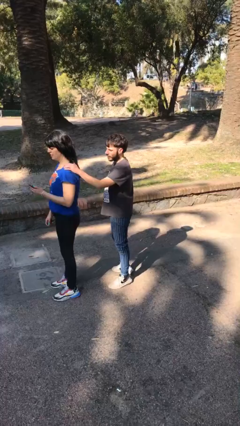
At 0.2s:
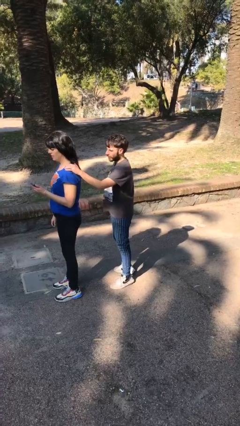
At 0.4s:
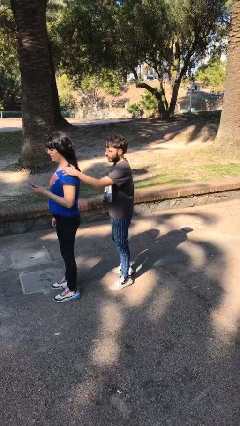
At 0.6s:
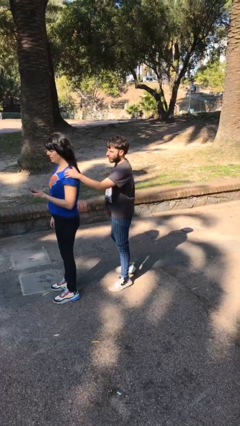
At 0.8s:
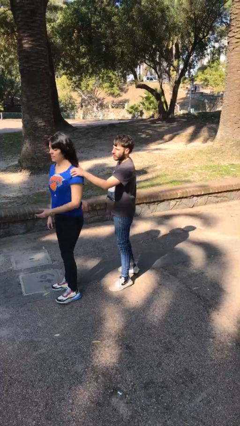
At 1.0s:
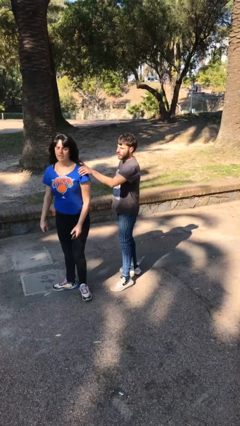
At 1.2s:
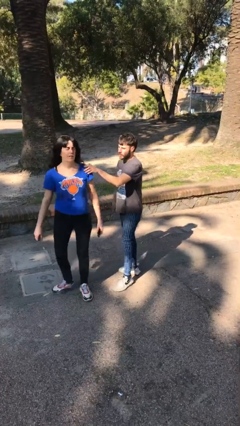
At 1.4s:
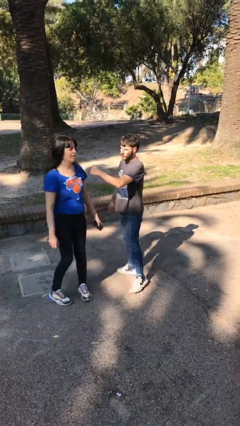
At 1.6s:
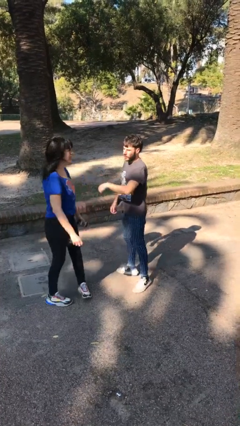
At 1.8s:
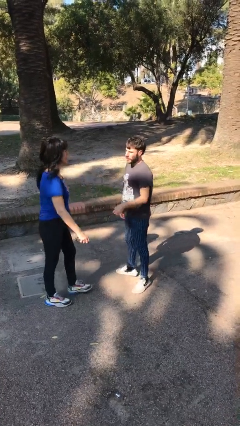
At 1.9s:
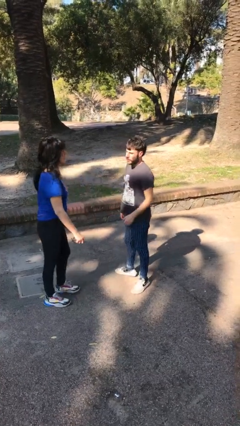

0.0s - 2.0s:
person spins person around

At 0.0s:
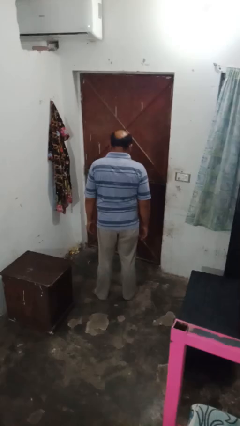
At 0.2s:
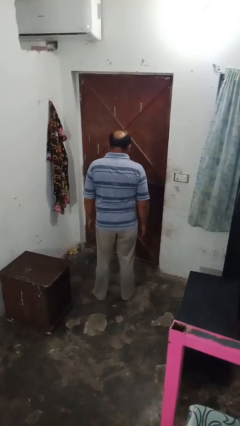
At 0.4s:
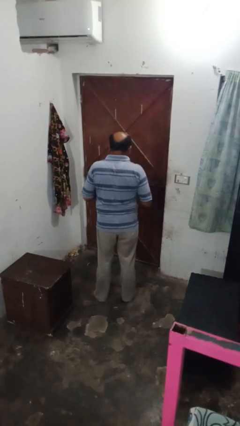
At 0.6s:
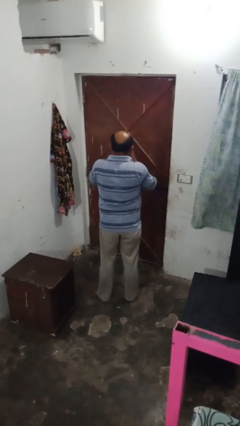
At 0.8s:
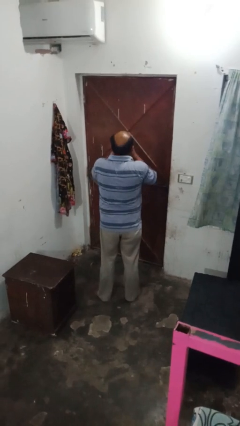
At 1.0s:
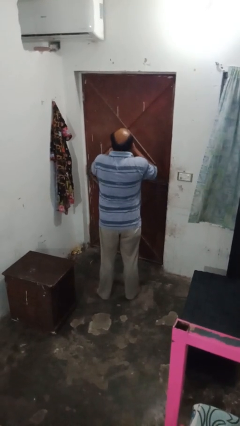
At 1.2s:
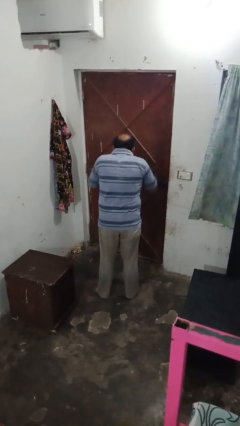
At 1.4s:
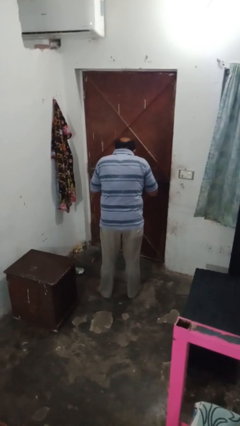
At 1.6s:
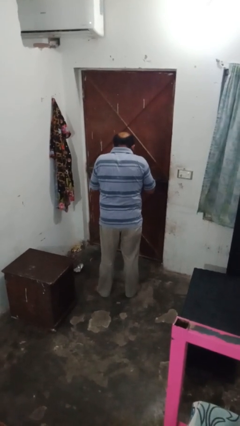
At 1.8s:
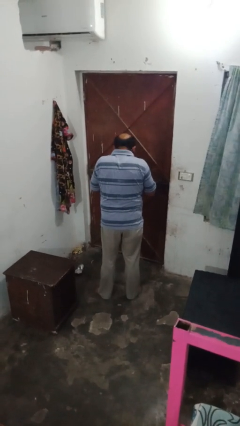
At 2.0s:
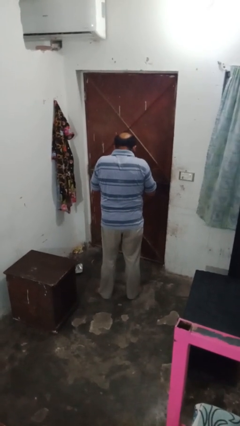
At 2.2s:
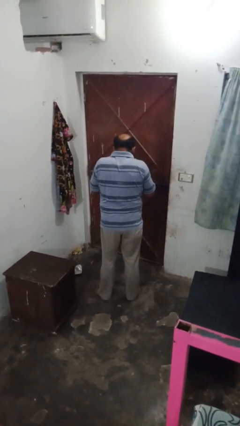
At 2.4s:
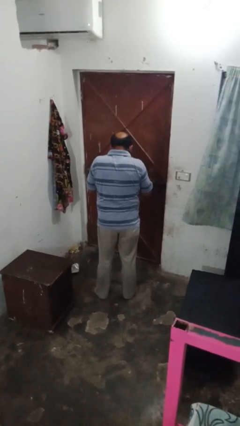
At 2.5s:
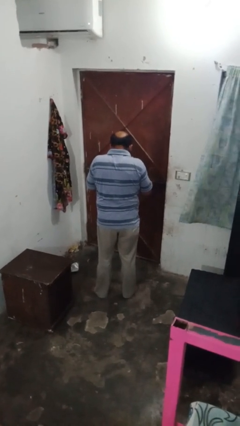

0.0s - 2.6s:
person blows nose

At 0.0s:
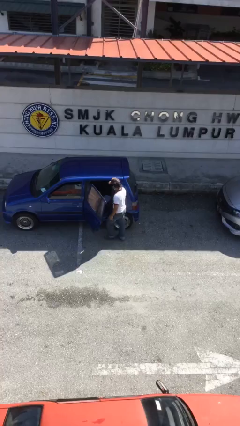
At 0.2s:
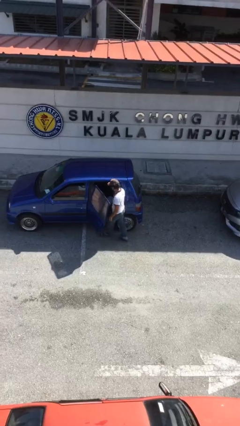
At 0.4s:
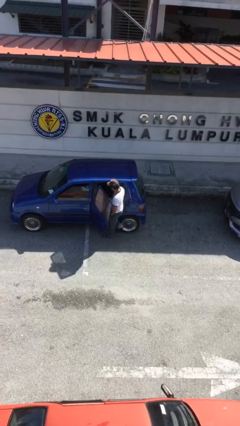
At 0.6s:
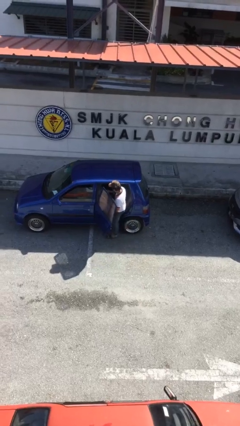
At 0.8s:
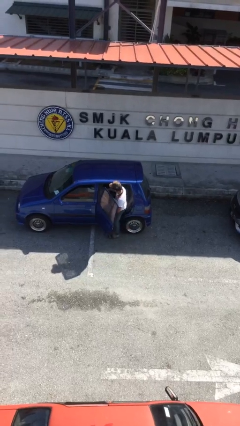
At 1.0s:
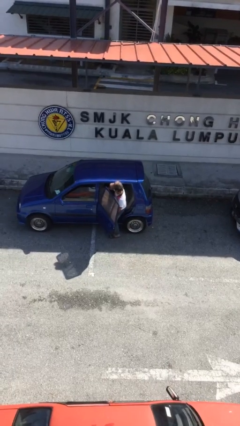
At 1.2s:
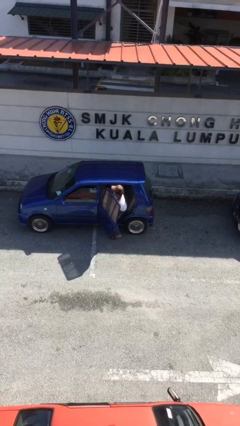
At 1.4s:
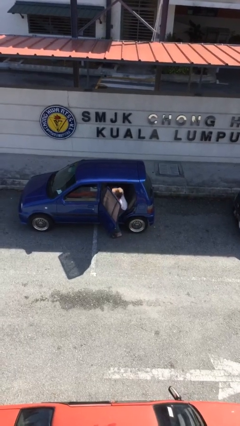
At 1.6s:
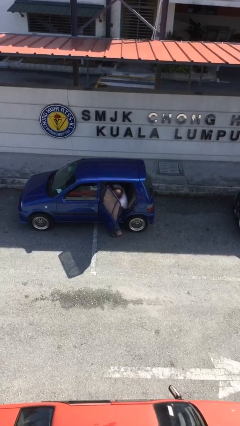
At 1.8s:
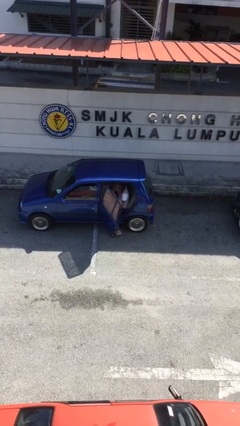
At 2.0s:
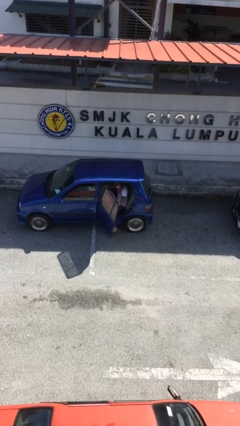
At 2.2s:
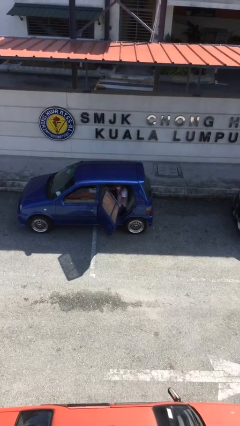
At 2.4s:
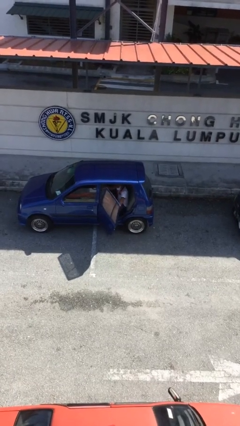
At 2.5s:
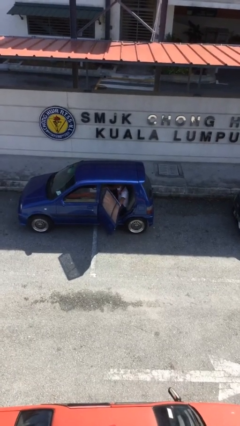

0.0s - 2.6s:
person enters car

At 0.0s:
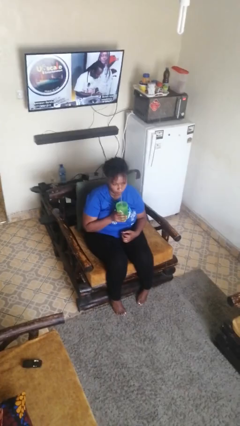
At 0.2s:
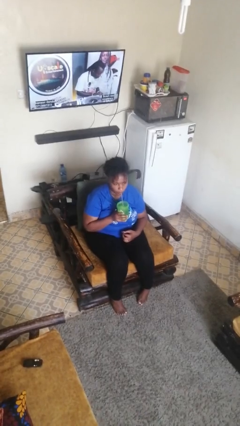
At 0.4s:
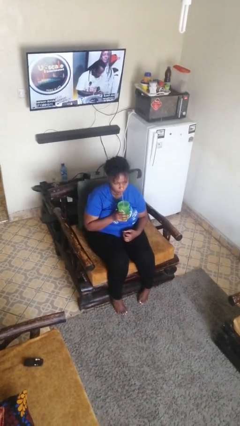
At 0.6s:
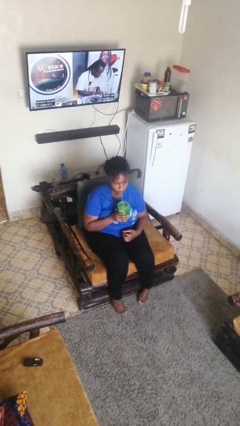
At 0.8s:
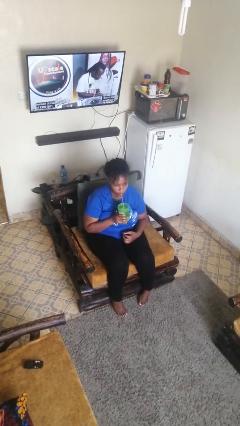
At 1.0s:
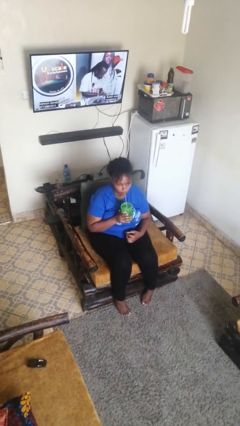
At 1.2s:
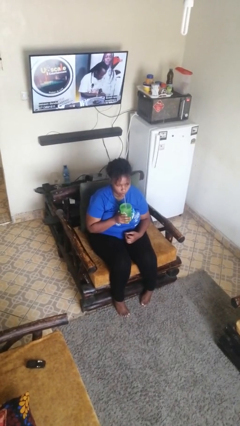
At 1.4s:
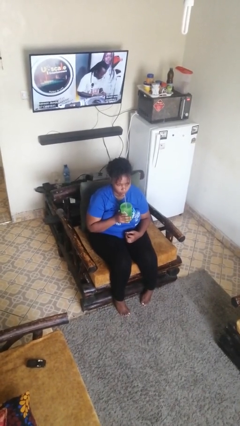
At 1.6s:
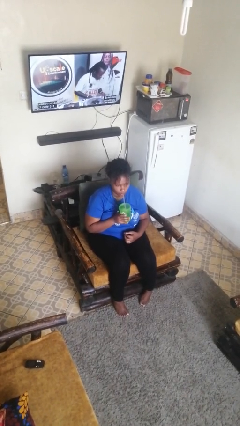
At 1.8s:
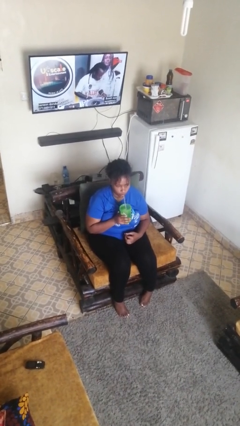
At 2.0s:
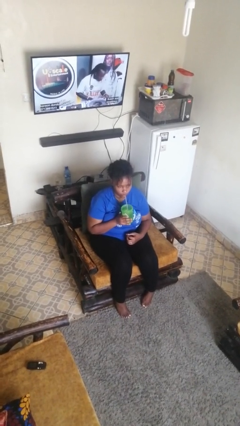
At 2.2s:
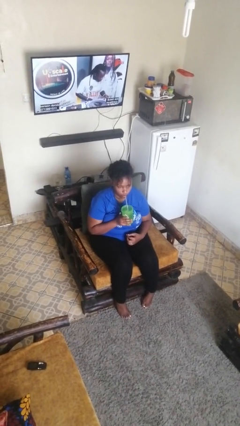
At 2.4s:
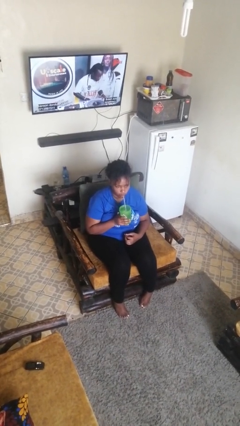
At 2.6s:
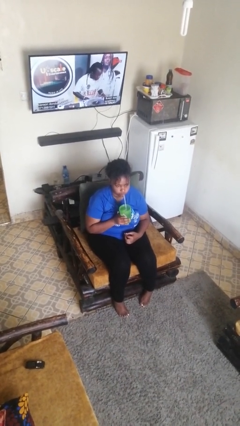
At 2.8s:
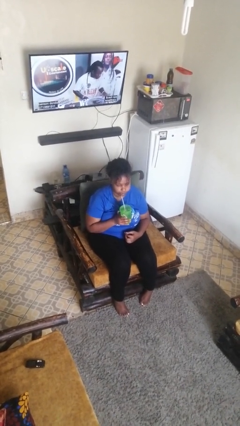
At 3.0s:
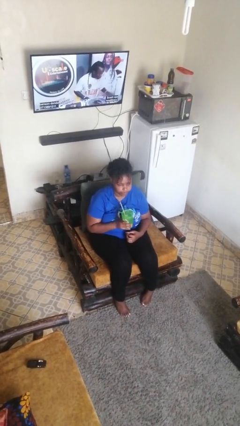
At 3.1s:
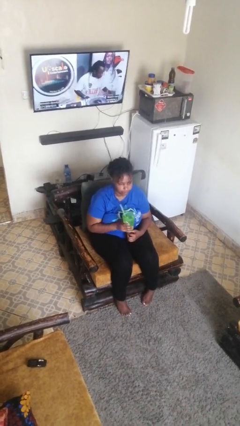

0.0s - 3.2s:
person drinks from straw

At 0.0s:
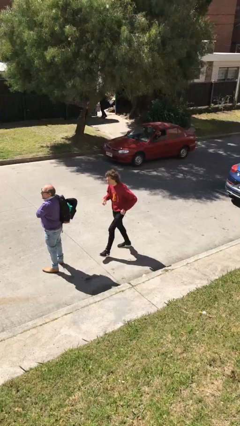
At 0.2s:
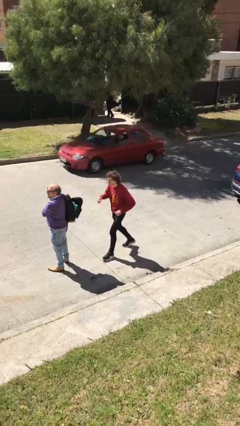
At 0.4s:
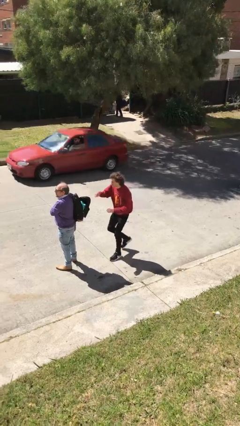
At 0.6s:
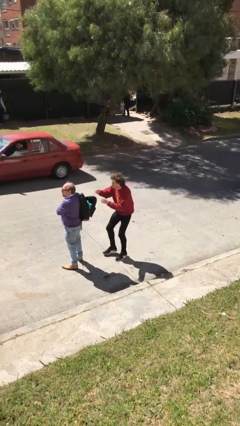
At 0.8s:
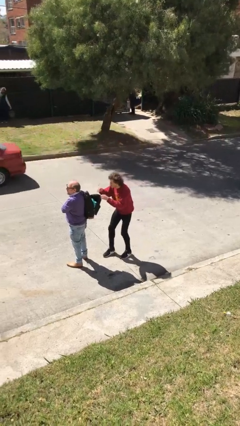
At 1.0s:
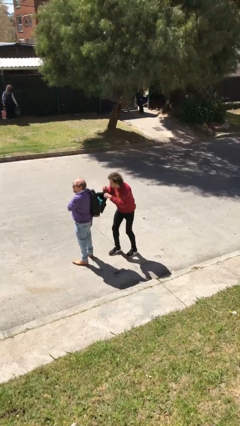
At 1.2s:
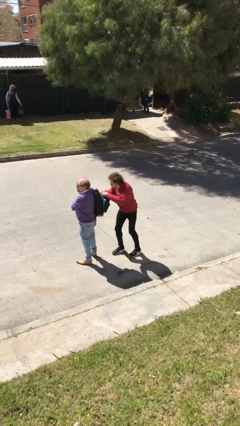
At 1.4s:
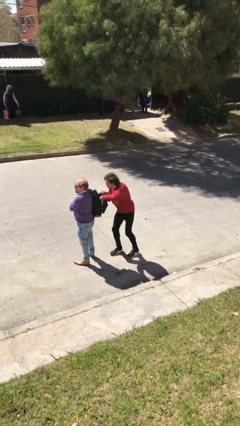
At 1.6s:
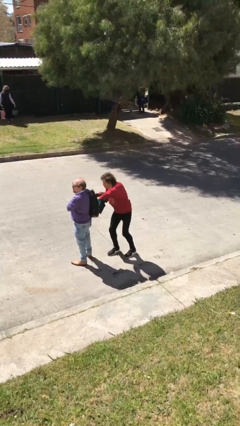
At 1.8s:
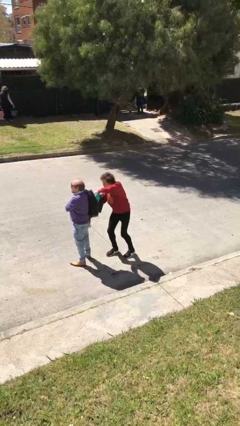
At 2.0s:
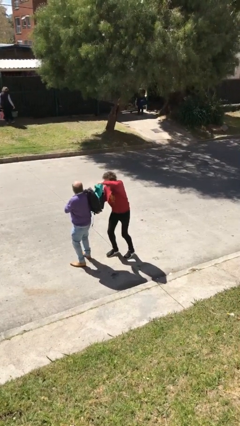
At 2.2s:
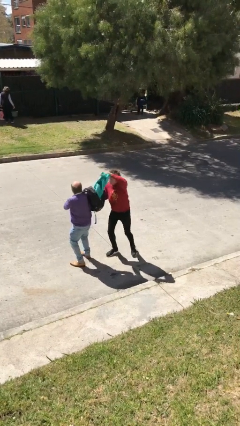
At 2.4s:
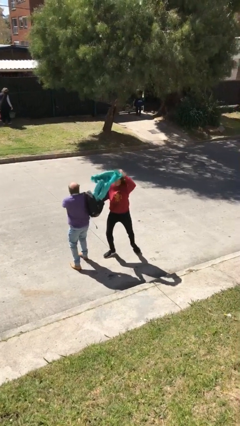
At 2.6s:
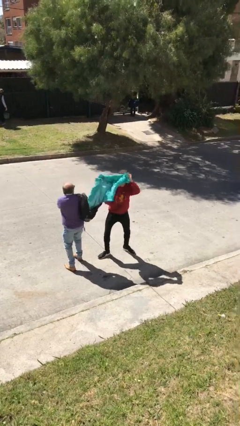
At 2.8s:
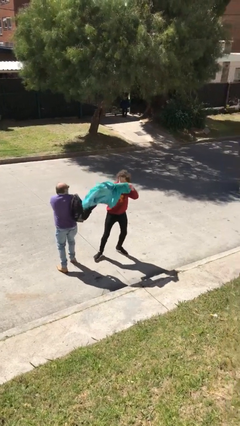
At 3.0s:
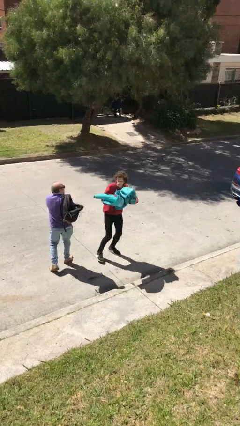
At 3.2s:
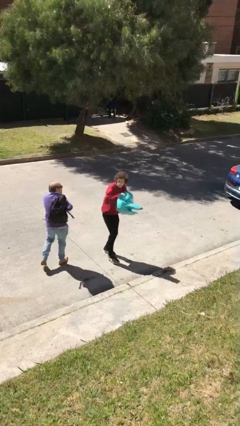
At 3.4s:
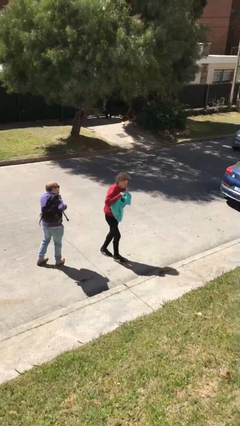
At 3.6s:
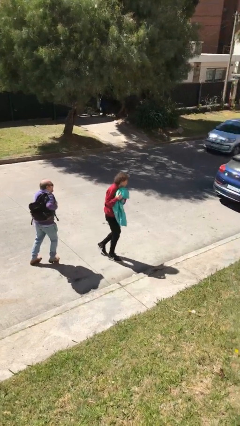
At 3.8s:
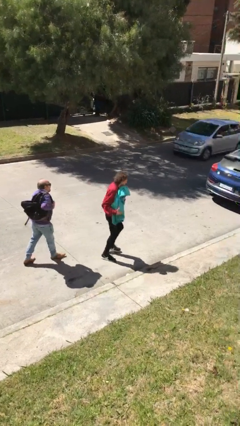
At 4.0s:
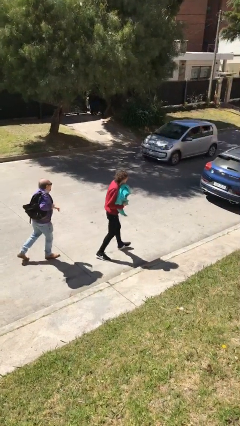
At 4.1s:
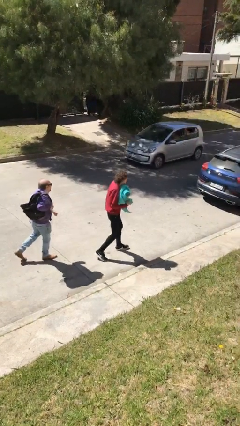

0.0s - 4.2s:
person steals object from person

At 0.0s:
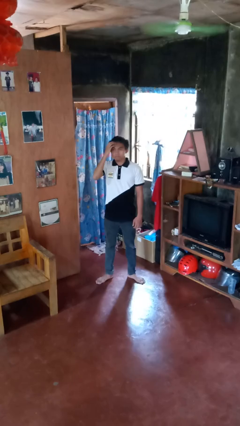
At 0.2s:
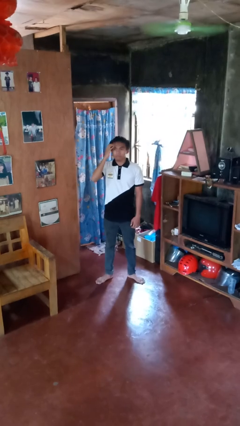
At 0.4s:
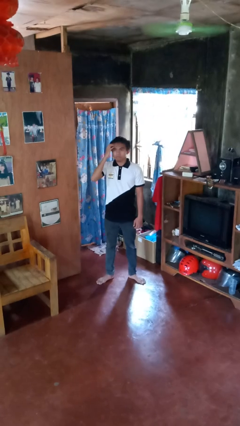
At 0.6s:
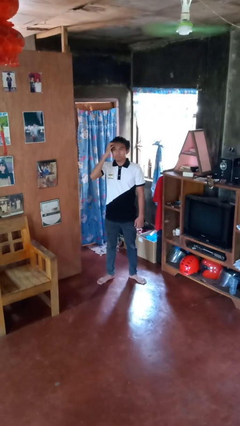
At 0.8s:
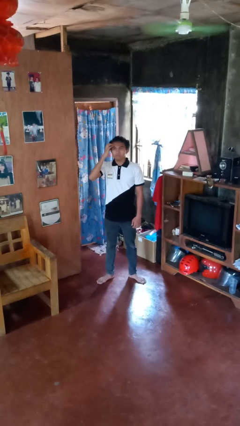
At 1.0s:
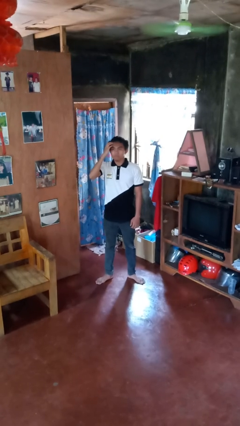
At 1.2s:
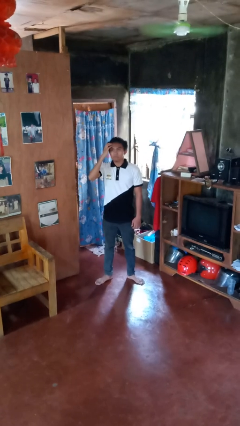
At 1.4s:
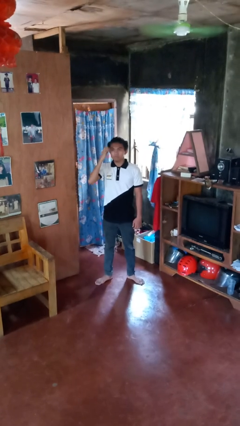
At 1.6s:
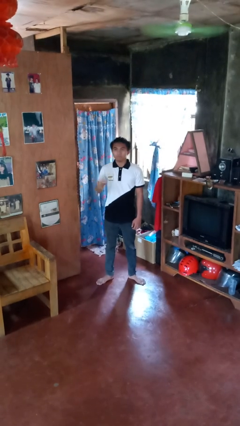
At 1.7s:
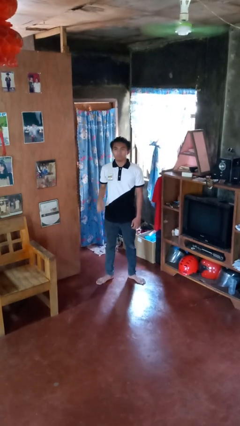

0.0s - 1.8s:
person scratches face

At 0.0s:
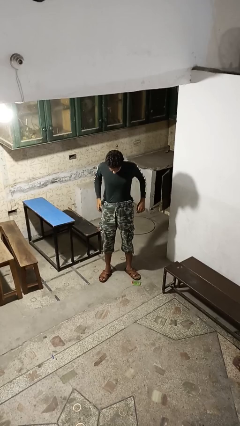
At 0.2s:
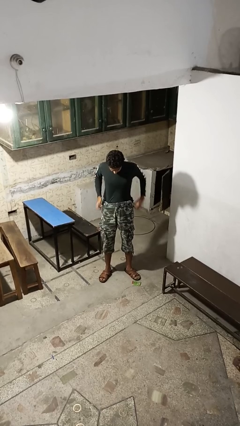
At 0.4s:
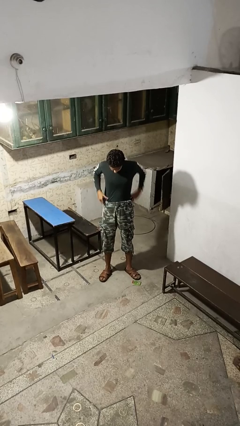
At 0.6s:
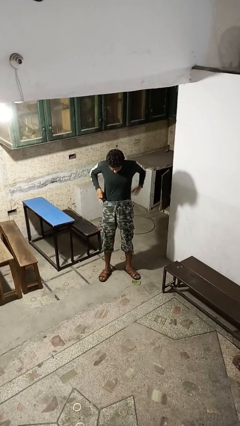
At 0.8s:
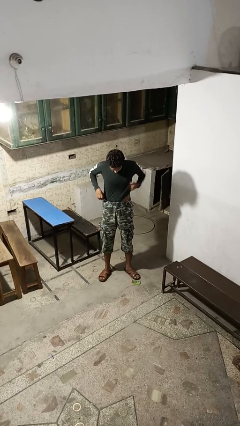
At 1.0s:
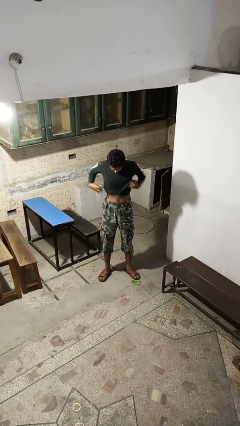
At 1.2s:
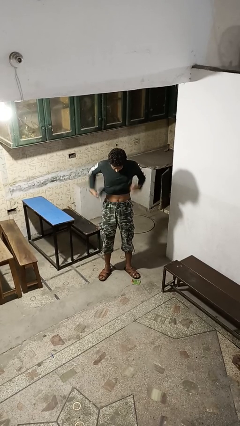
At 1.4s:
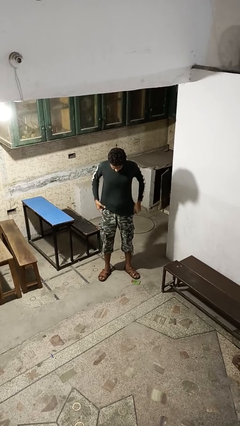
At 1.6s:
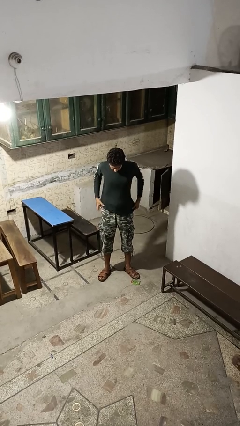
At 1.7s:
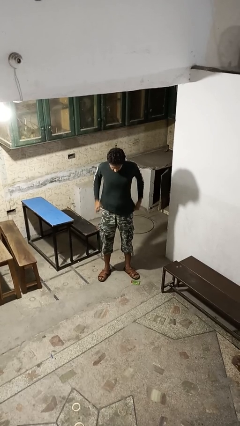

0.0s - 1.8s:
person untucks shirt
